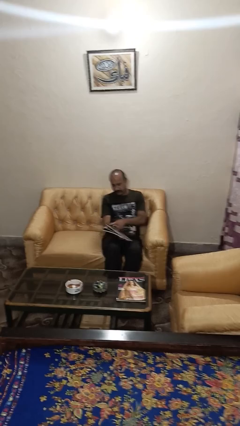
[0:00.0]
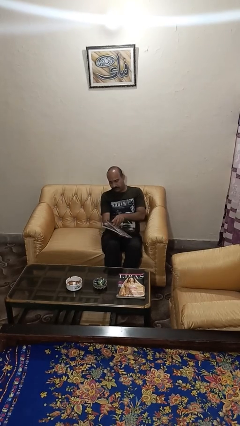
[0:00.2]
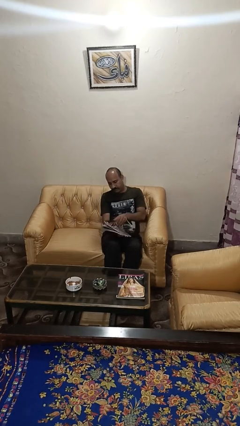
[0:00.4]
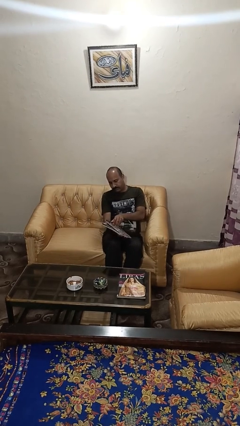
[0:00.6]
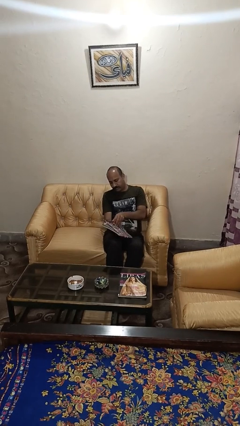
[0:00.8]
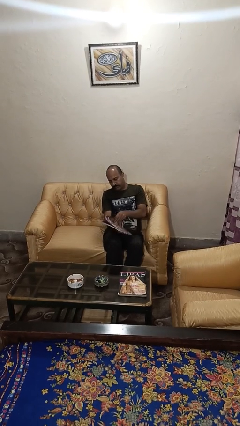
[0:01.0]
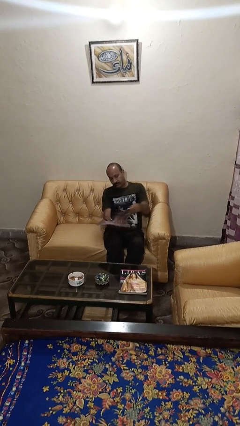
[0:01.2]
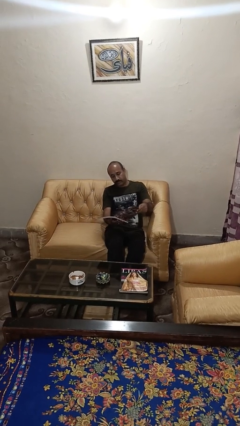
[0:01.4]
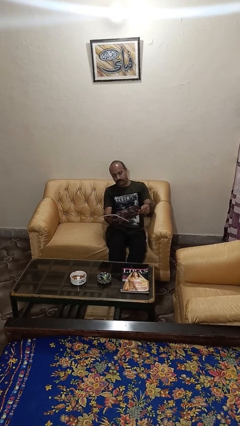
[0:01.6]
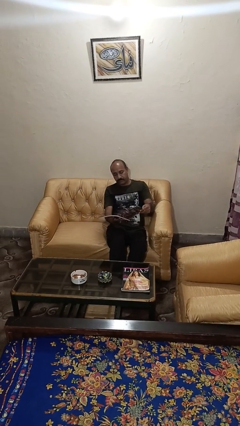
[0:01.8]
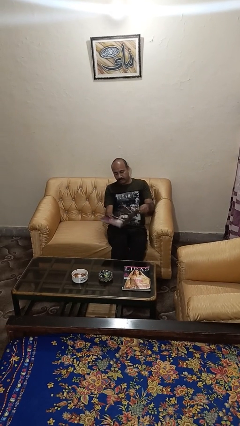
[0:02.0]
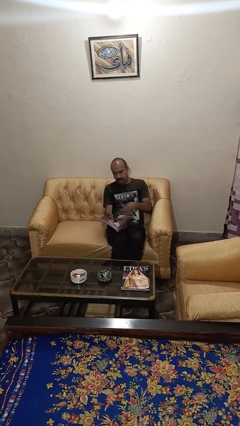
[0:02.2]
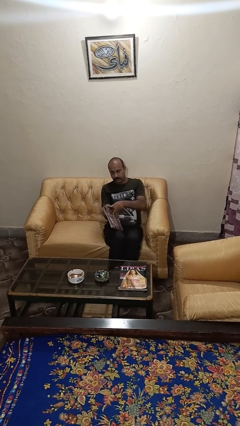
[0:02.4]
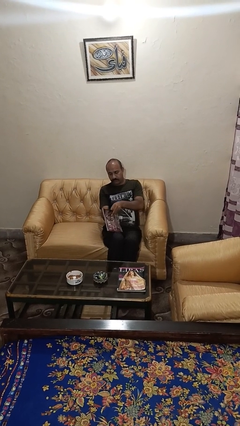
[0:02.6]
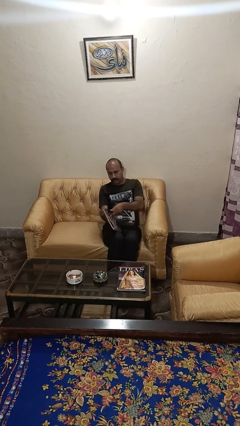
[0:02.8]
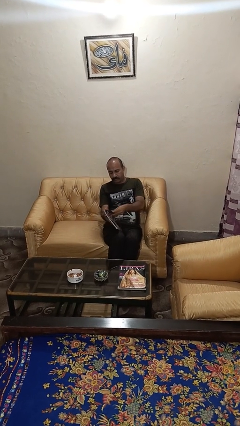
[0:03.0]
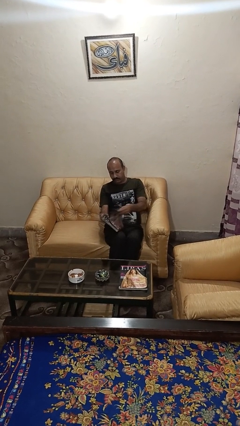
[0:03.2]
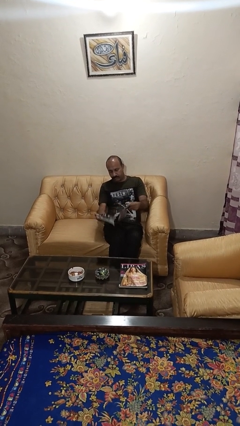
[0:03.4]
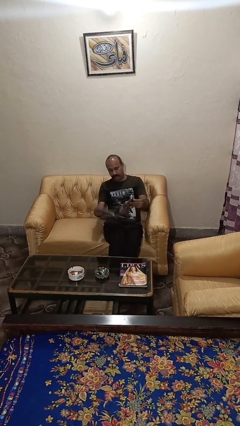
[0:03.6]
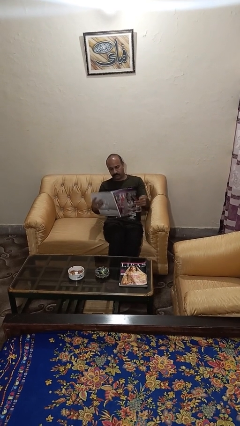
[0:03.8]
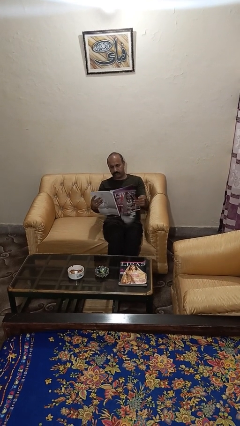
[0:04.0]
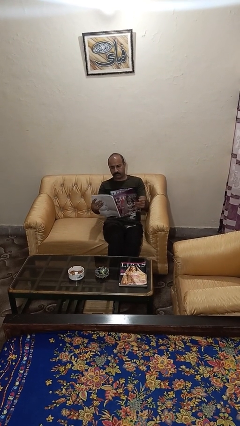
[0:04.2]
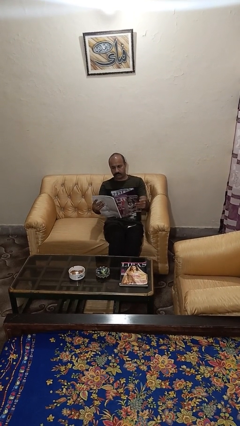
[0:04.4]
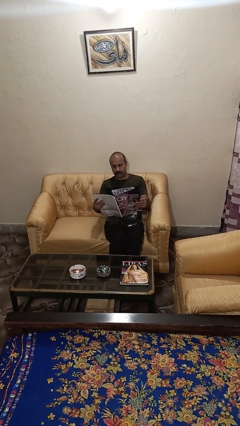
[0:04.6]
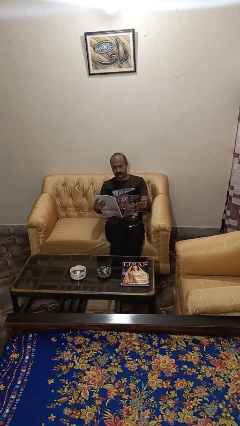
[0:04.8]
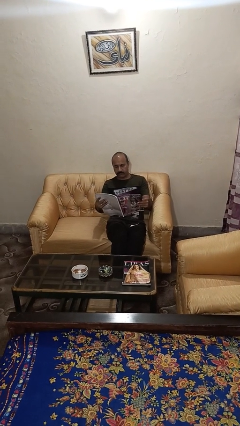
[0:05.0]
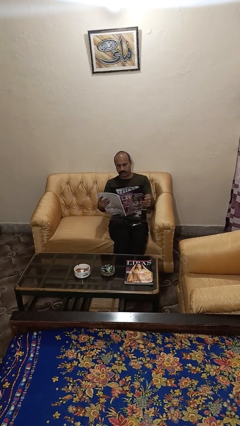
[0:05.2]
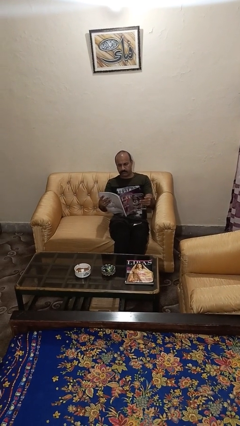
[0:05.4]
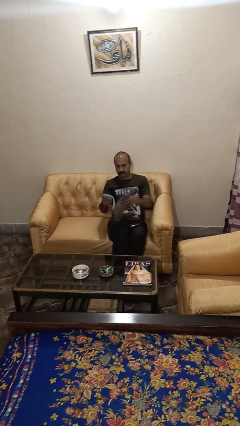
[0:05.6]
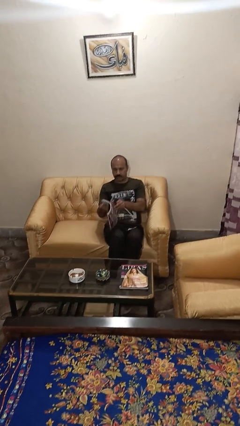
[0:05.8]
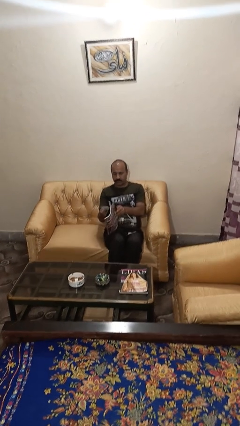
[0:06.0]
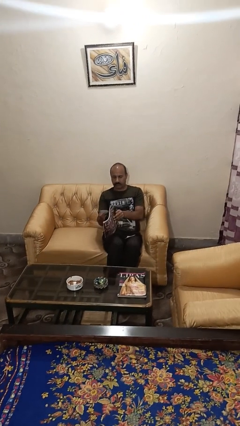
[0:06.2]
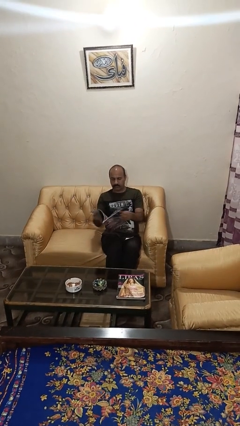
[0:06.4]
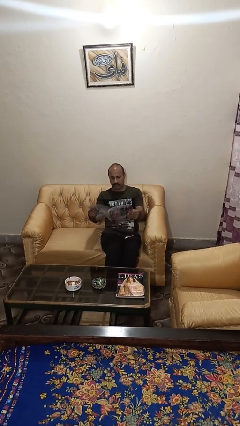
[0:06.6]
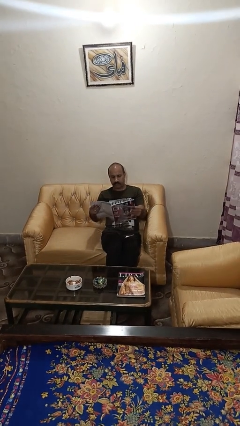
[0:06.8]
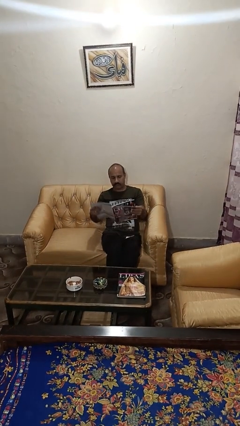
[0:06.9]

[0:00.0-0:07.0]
person reads magazine

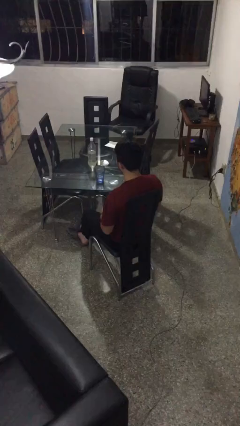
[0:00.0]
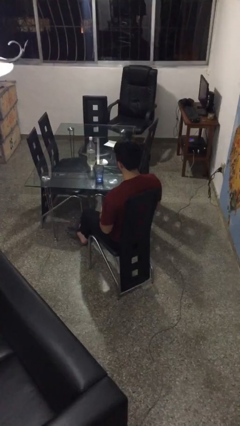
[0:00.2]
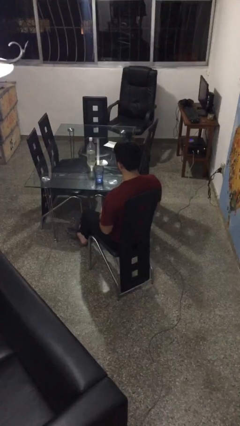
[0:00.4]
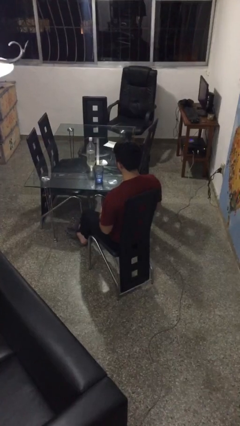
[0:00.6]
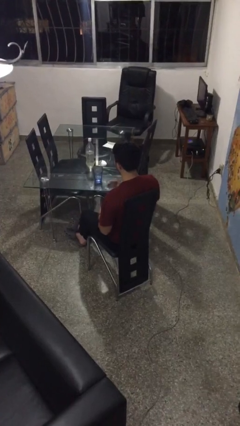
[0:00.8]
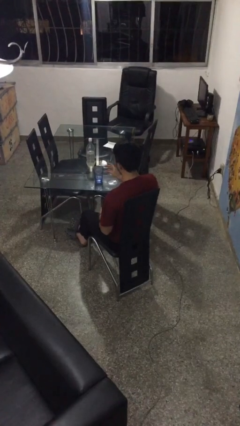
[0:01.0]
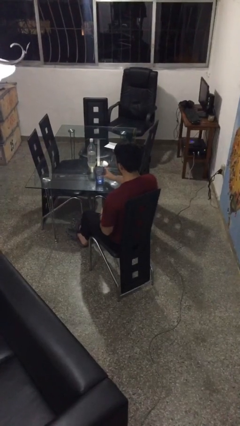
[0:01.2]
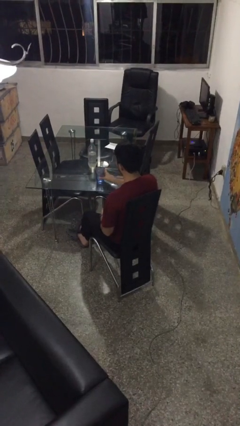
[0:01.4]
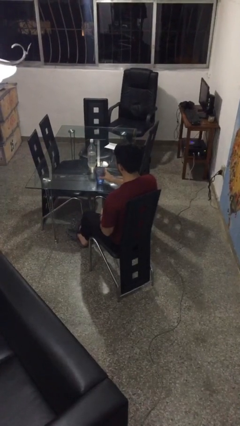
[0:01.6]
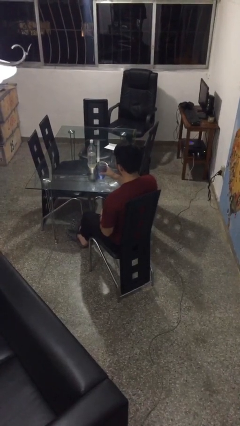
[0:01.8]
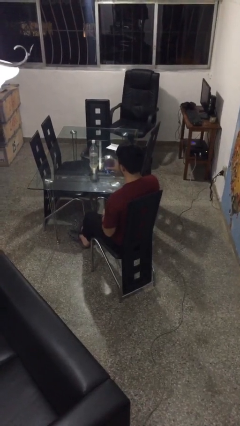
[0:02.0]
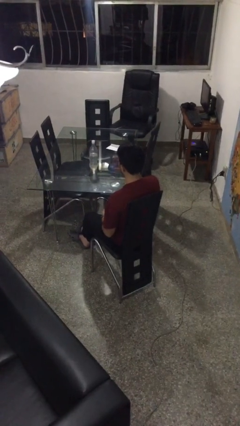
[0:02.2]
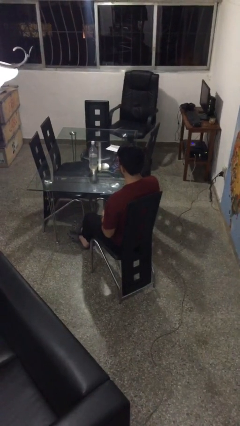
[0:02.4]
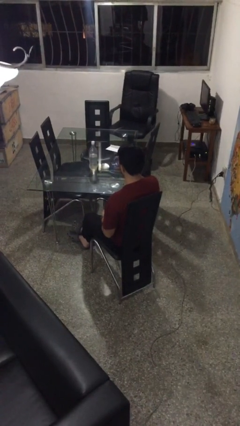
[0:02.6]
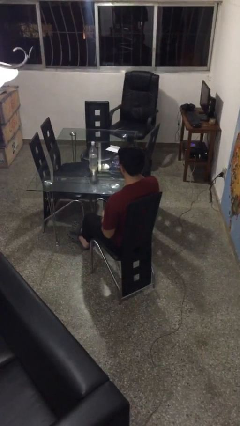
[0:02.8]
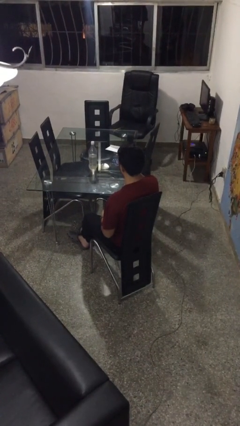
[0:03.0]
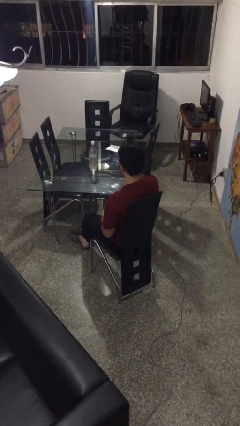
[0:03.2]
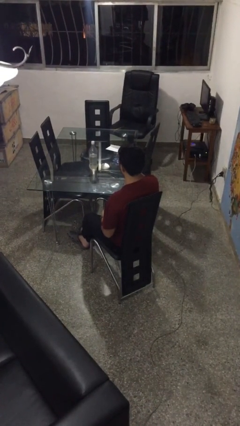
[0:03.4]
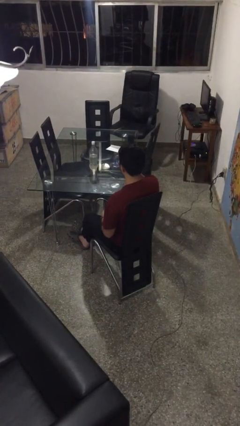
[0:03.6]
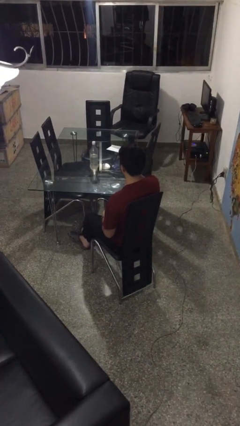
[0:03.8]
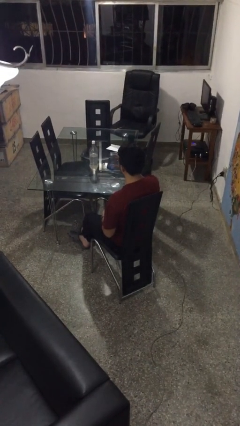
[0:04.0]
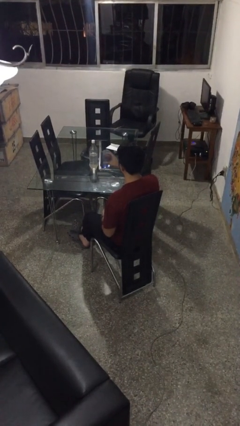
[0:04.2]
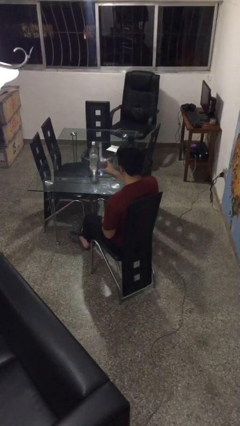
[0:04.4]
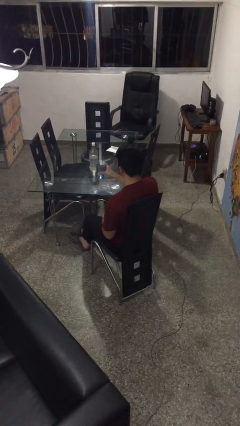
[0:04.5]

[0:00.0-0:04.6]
person drinks from cup

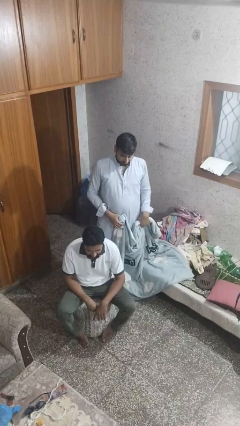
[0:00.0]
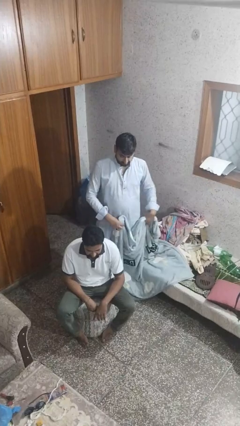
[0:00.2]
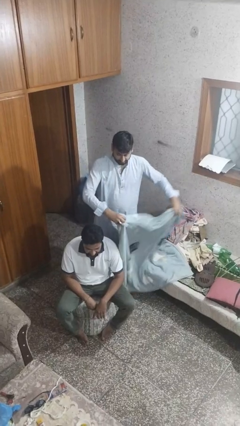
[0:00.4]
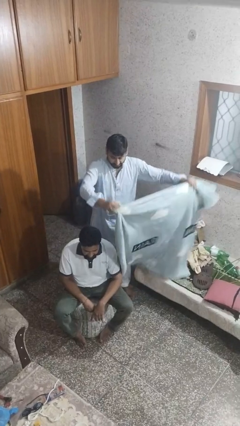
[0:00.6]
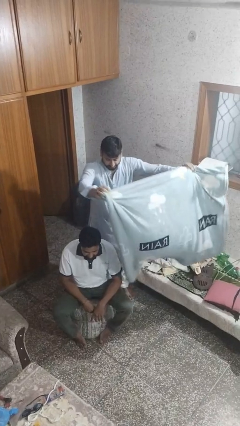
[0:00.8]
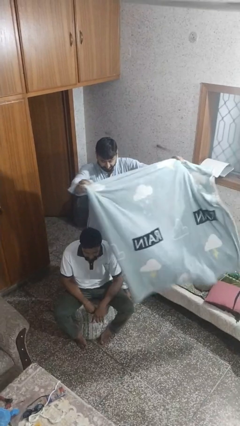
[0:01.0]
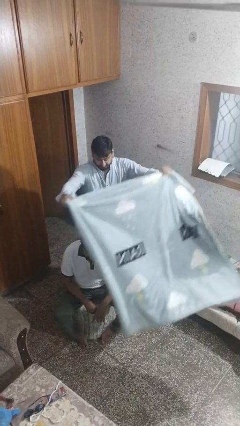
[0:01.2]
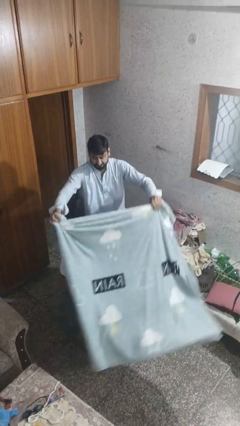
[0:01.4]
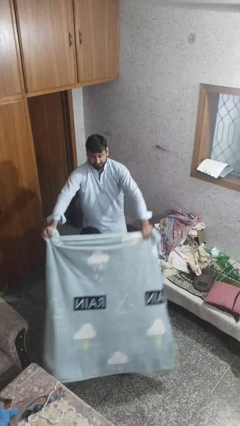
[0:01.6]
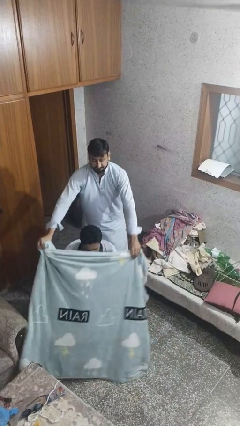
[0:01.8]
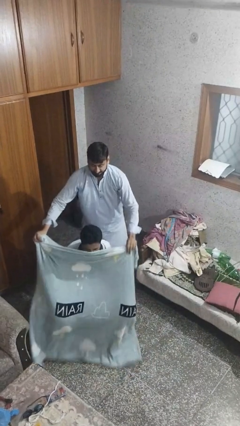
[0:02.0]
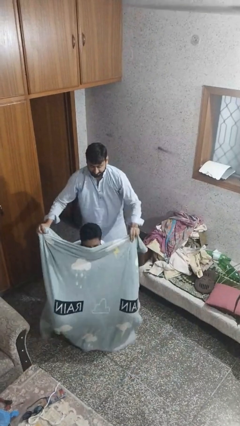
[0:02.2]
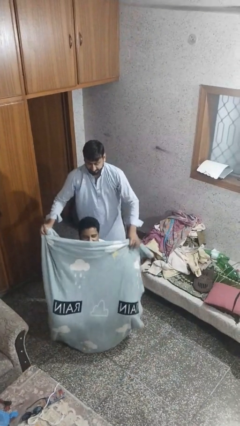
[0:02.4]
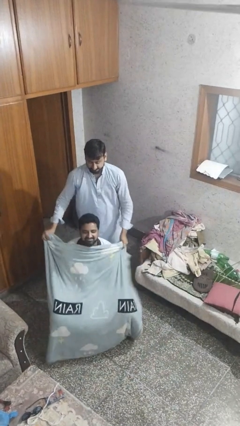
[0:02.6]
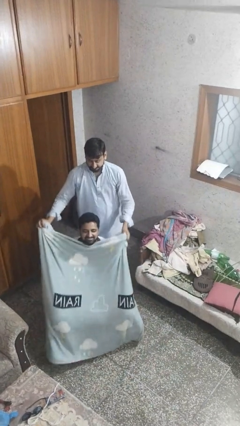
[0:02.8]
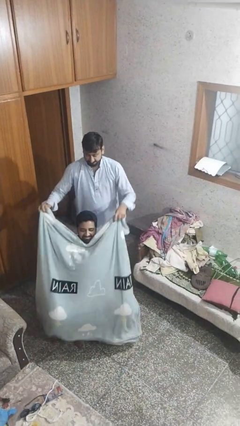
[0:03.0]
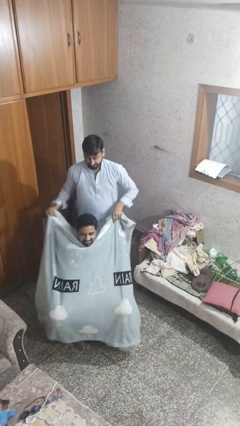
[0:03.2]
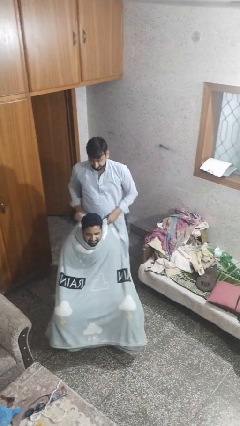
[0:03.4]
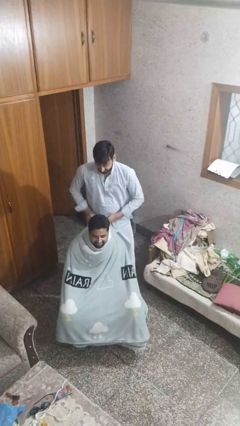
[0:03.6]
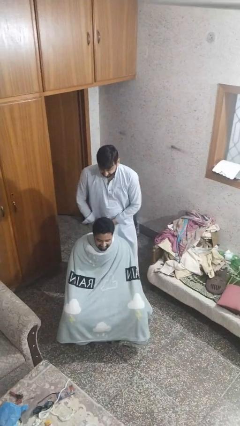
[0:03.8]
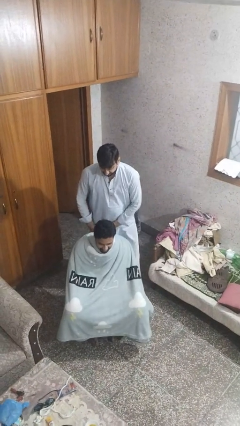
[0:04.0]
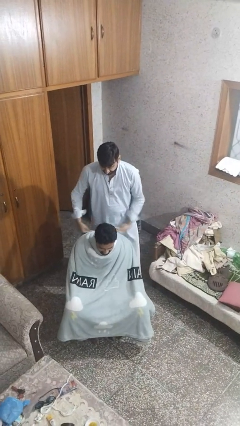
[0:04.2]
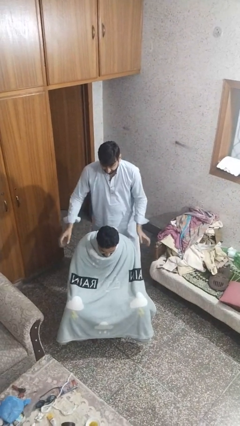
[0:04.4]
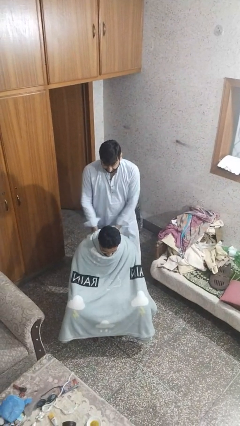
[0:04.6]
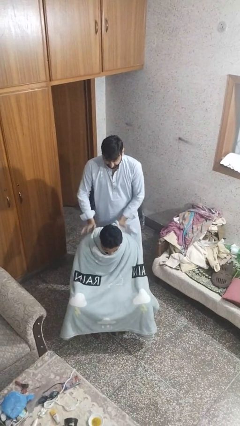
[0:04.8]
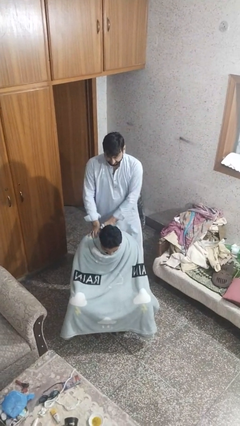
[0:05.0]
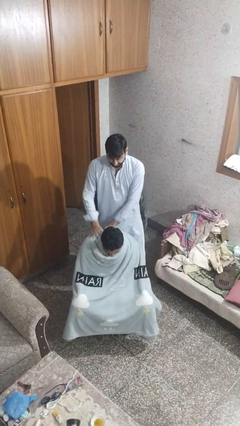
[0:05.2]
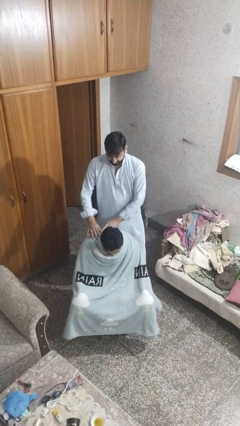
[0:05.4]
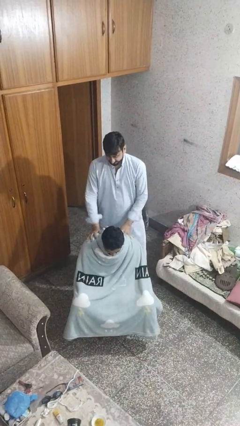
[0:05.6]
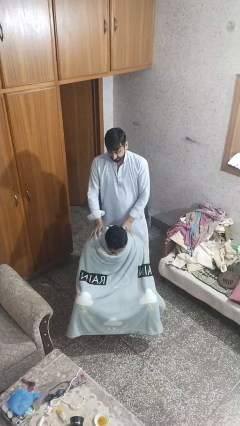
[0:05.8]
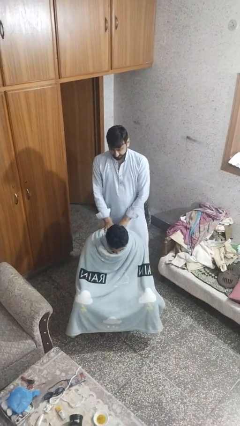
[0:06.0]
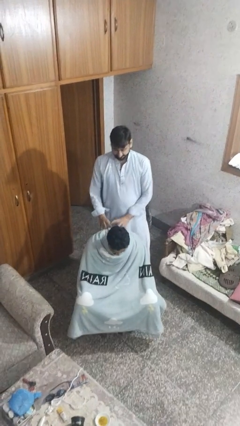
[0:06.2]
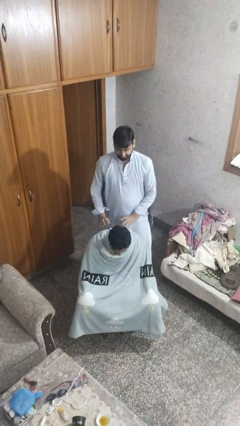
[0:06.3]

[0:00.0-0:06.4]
person covers friend with blanket
